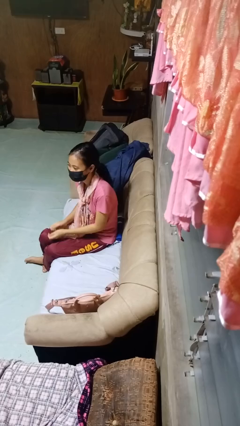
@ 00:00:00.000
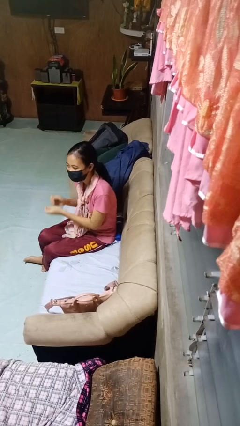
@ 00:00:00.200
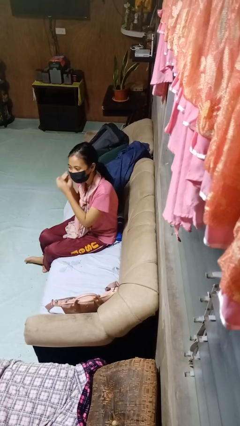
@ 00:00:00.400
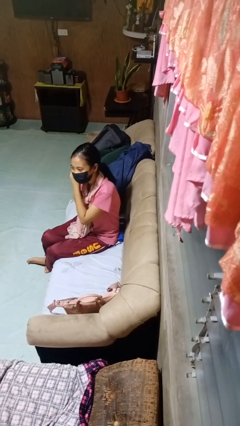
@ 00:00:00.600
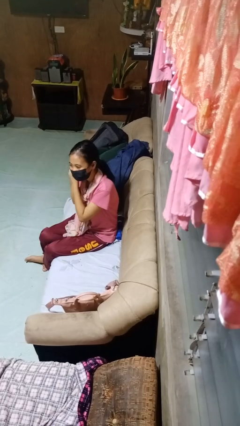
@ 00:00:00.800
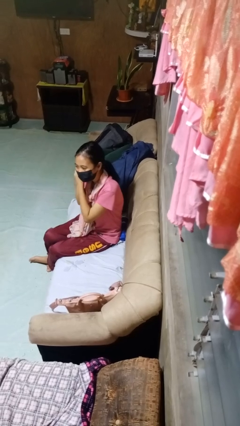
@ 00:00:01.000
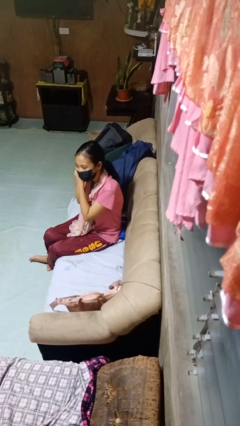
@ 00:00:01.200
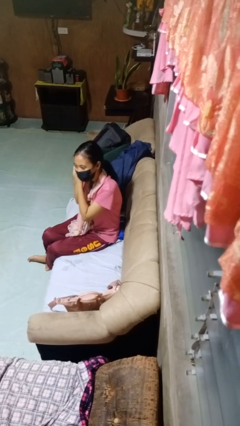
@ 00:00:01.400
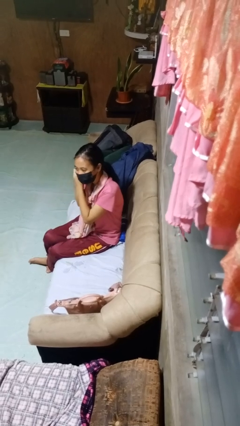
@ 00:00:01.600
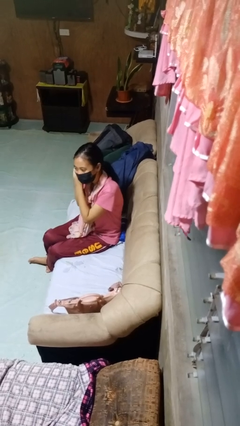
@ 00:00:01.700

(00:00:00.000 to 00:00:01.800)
person takes off earrings

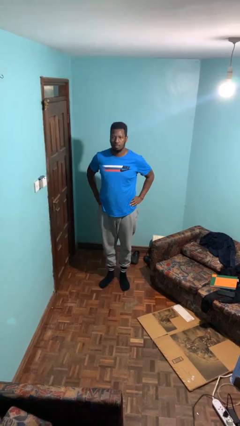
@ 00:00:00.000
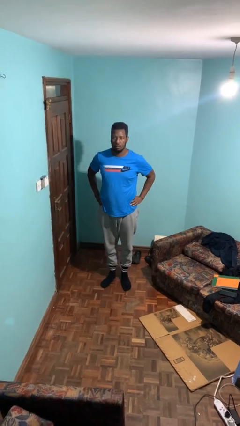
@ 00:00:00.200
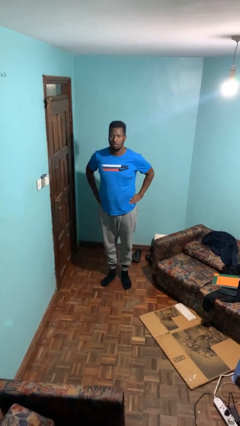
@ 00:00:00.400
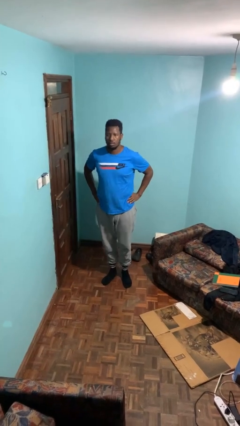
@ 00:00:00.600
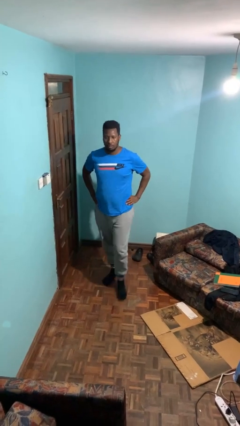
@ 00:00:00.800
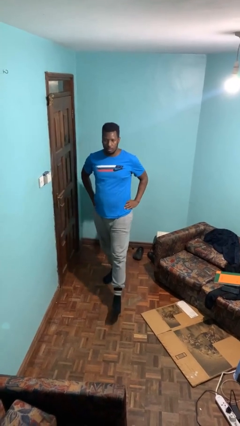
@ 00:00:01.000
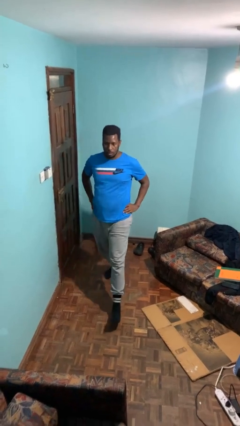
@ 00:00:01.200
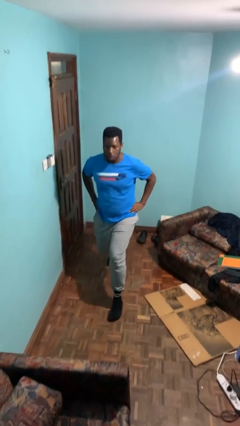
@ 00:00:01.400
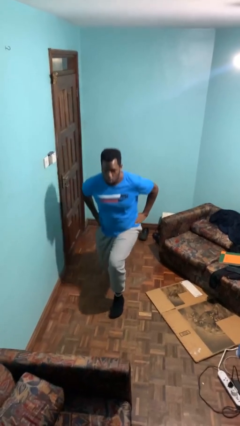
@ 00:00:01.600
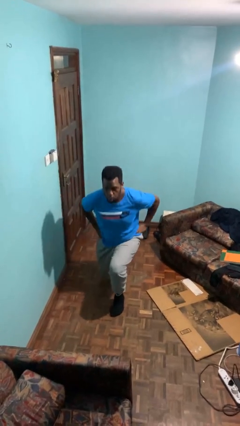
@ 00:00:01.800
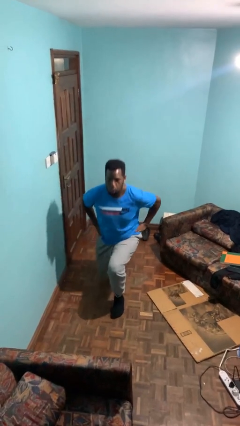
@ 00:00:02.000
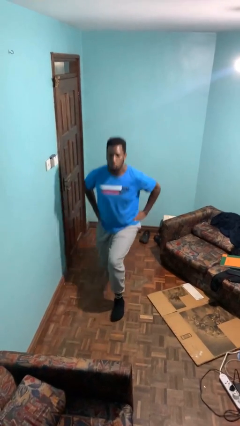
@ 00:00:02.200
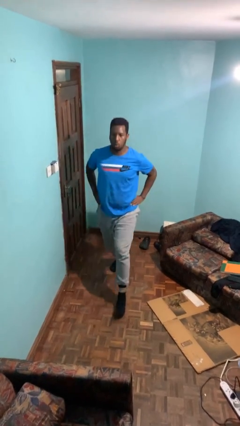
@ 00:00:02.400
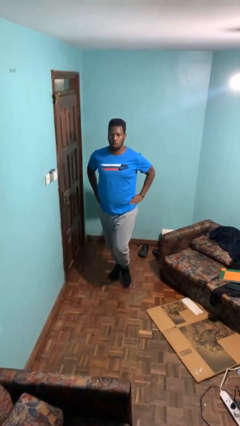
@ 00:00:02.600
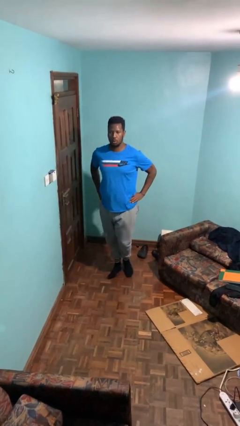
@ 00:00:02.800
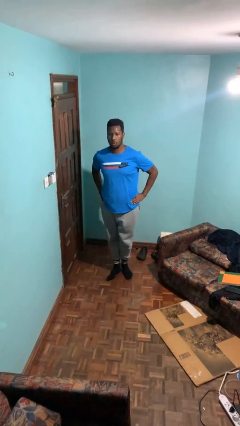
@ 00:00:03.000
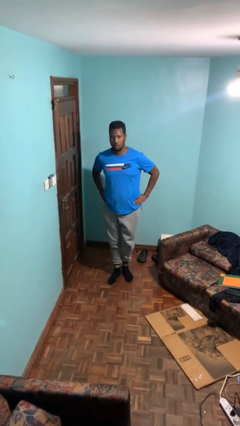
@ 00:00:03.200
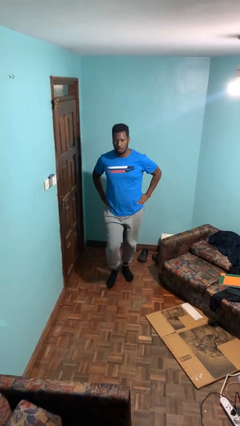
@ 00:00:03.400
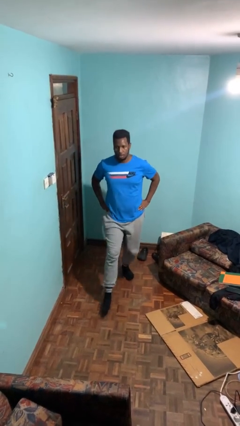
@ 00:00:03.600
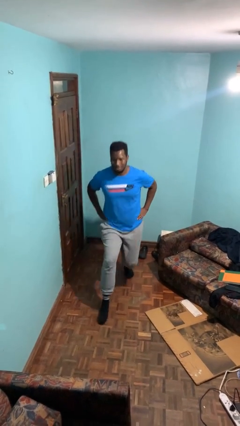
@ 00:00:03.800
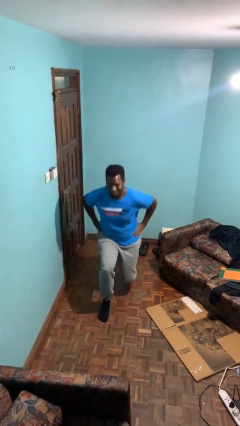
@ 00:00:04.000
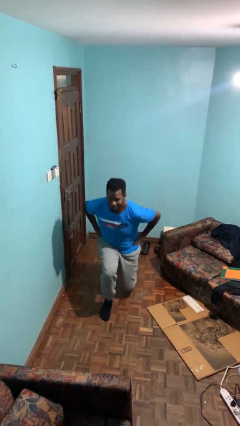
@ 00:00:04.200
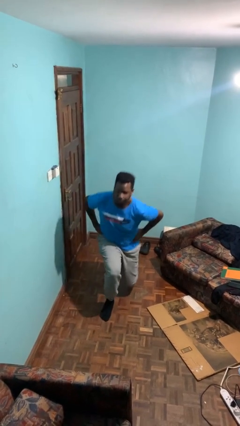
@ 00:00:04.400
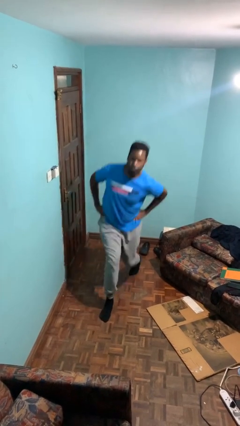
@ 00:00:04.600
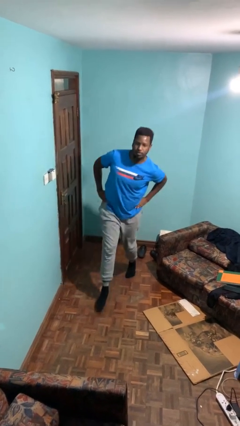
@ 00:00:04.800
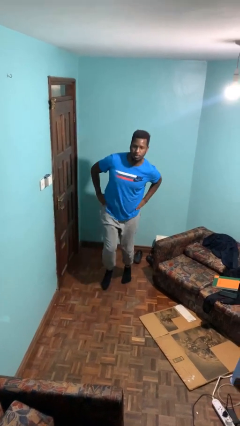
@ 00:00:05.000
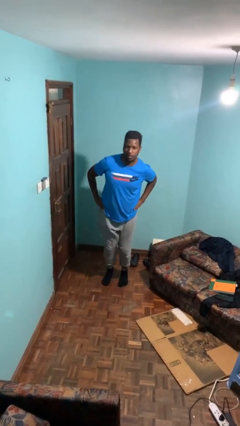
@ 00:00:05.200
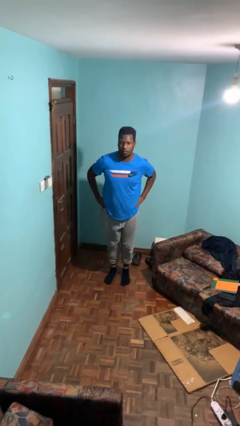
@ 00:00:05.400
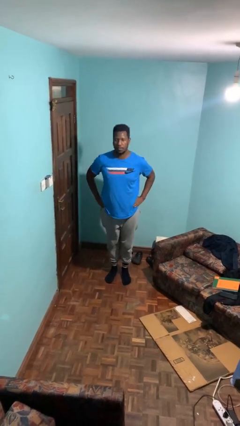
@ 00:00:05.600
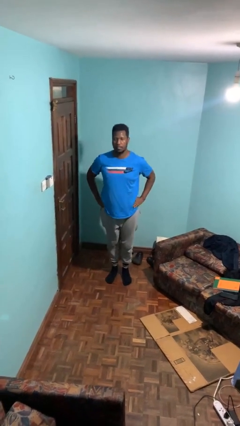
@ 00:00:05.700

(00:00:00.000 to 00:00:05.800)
person exercises with lunges

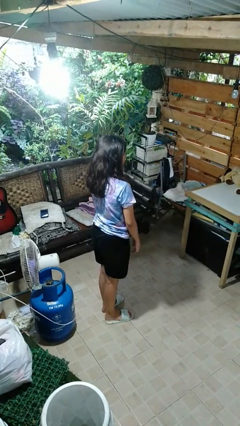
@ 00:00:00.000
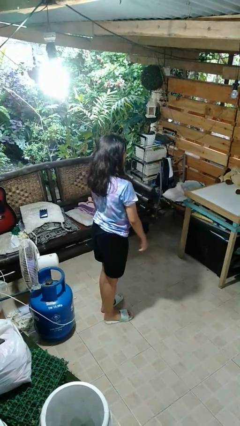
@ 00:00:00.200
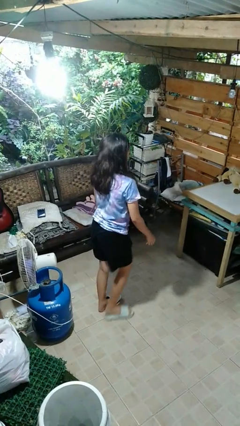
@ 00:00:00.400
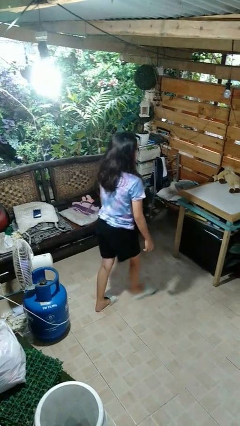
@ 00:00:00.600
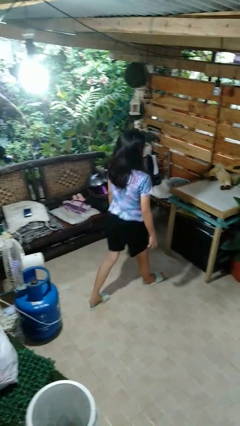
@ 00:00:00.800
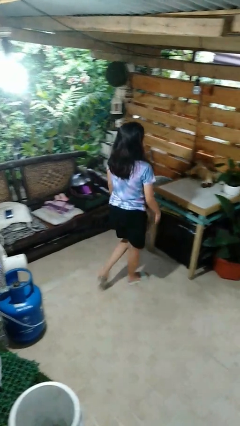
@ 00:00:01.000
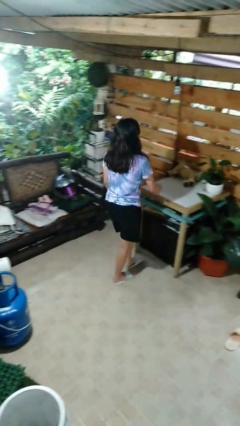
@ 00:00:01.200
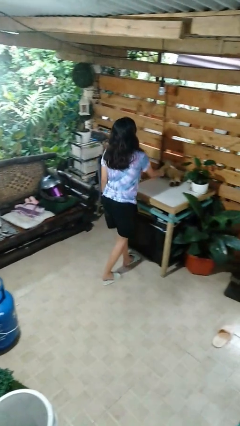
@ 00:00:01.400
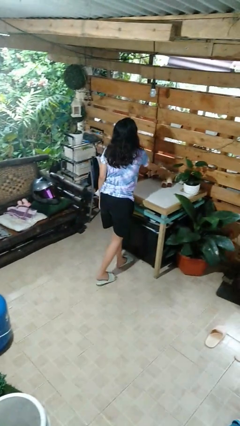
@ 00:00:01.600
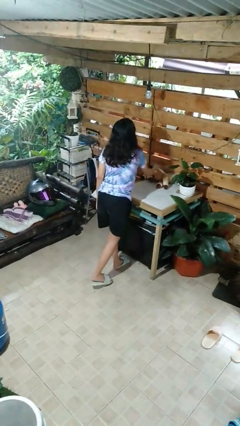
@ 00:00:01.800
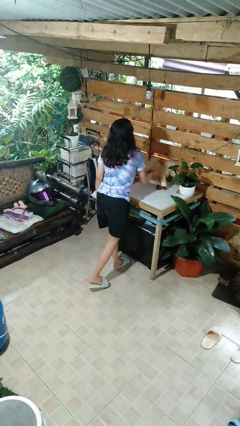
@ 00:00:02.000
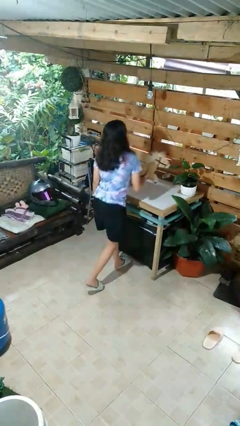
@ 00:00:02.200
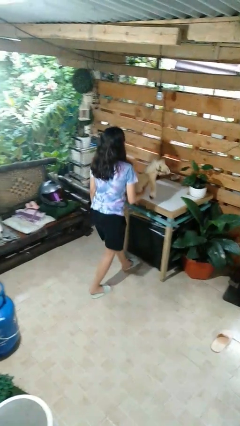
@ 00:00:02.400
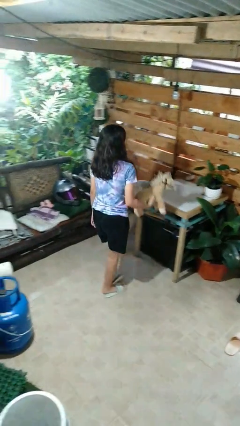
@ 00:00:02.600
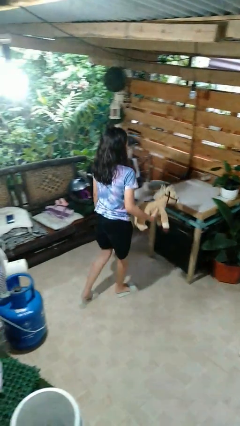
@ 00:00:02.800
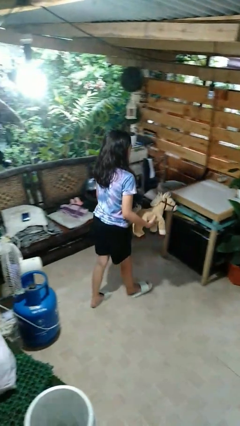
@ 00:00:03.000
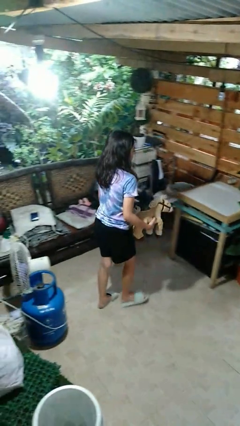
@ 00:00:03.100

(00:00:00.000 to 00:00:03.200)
person picks up object from table

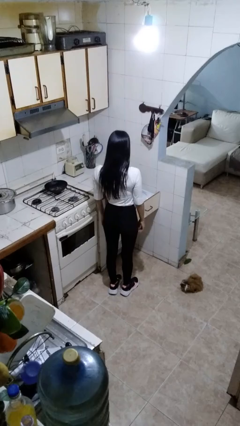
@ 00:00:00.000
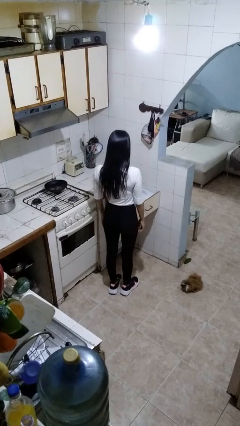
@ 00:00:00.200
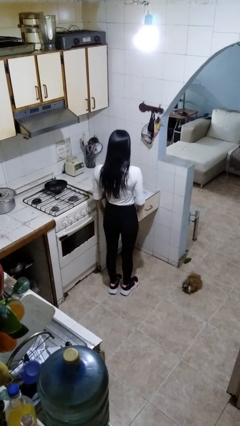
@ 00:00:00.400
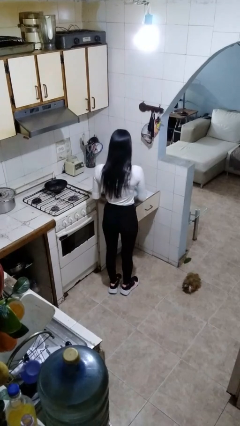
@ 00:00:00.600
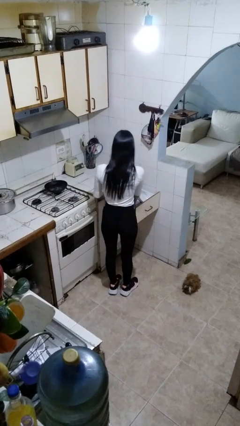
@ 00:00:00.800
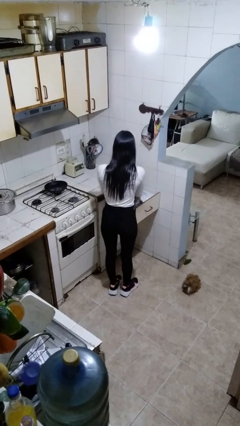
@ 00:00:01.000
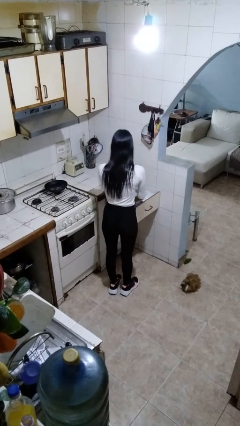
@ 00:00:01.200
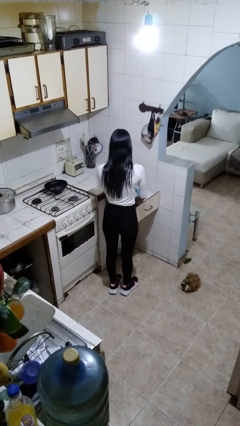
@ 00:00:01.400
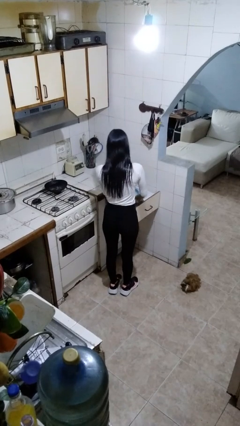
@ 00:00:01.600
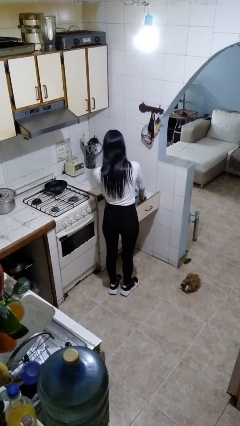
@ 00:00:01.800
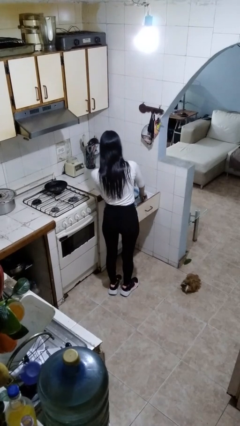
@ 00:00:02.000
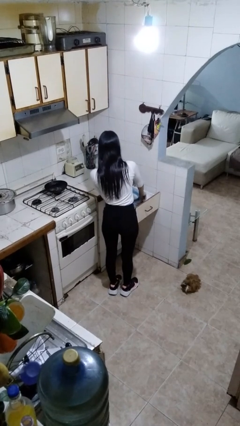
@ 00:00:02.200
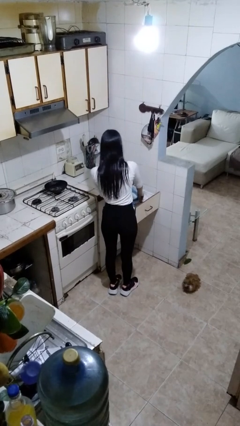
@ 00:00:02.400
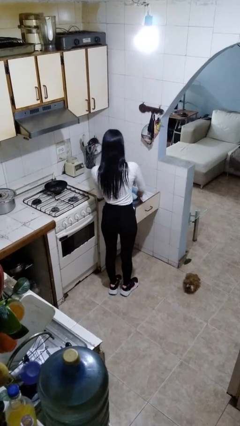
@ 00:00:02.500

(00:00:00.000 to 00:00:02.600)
person searches in kitchen drawer

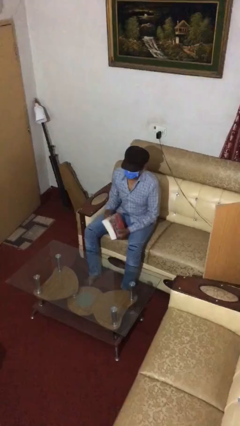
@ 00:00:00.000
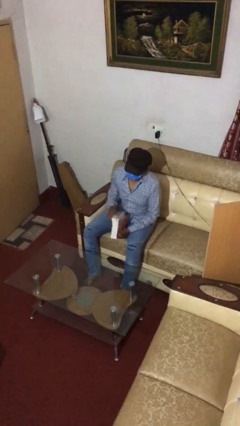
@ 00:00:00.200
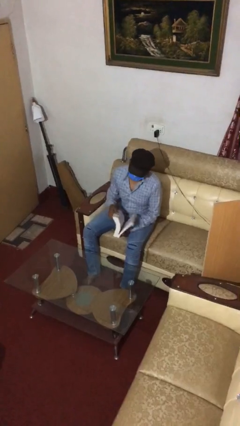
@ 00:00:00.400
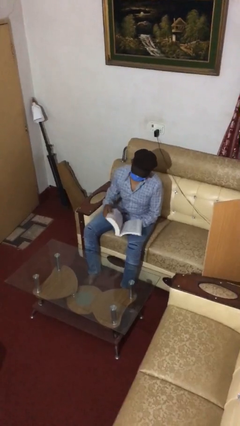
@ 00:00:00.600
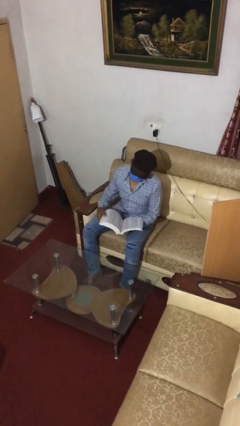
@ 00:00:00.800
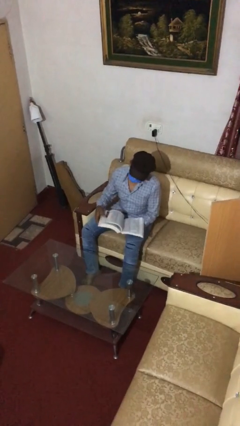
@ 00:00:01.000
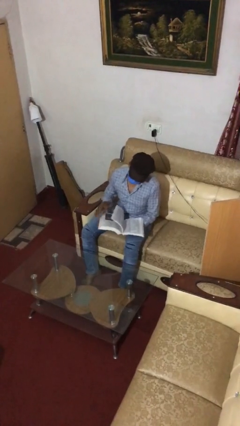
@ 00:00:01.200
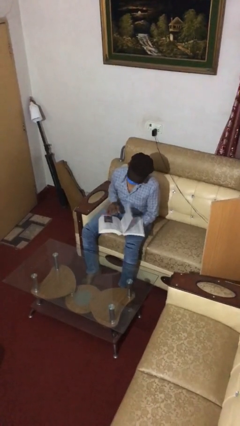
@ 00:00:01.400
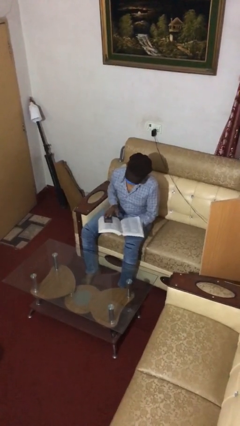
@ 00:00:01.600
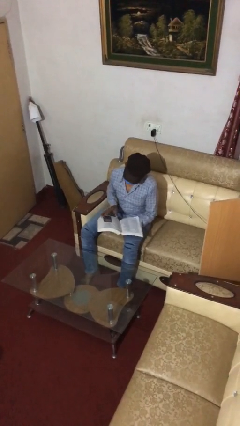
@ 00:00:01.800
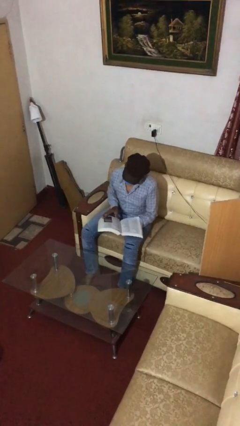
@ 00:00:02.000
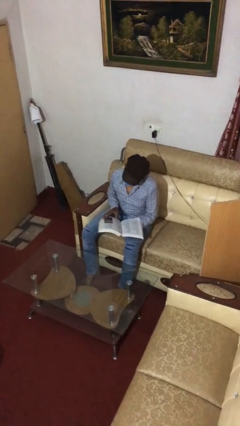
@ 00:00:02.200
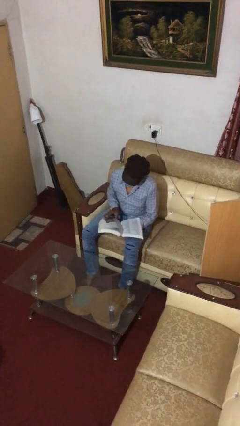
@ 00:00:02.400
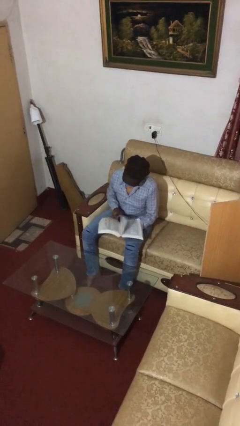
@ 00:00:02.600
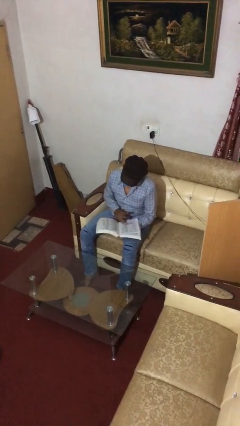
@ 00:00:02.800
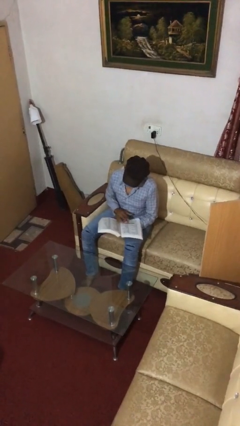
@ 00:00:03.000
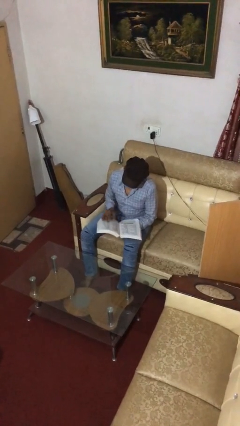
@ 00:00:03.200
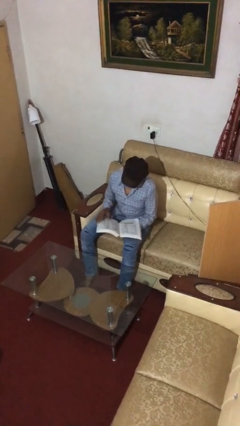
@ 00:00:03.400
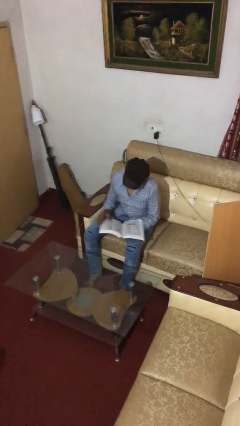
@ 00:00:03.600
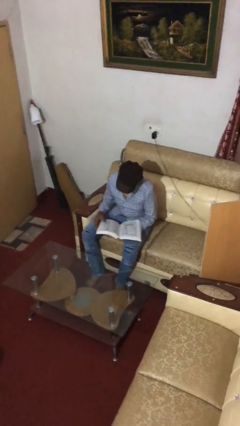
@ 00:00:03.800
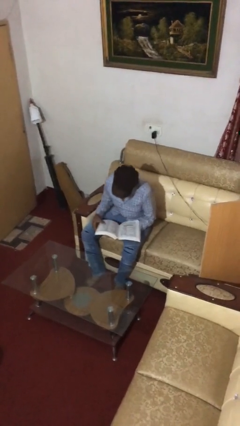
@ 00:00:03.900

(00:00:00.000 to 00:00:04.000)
person reads document
